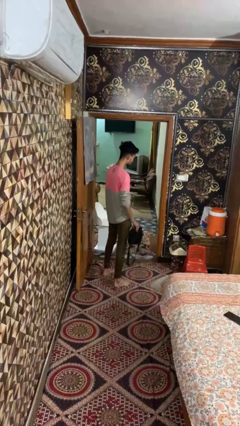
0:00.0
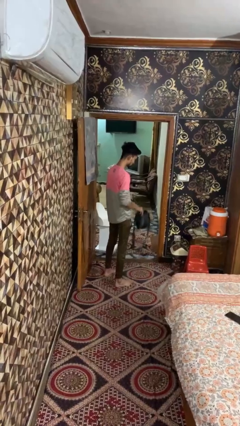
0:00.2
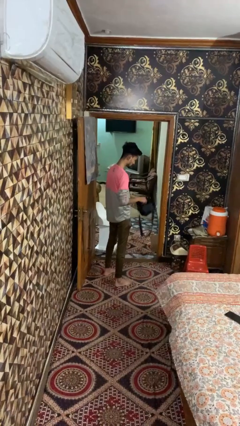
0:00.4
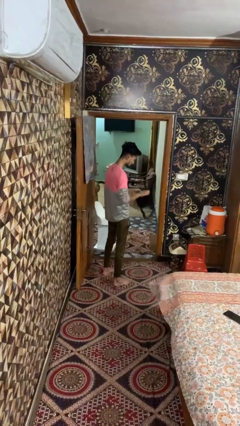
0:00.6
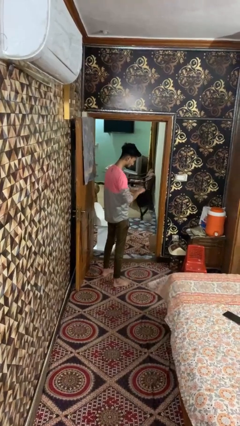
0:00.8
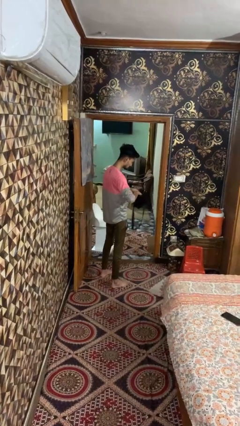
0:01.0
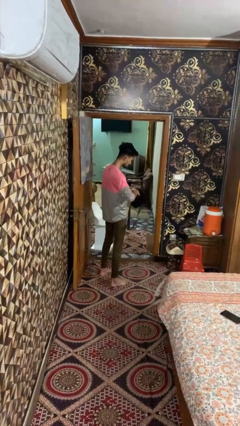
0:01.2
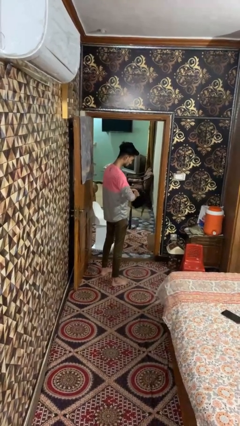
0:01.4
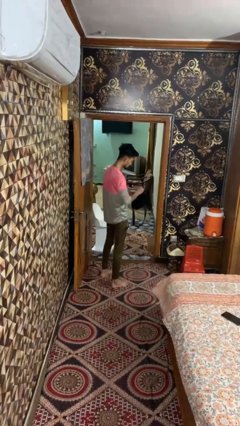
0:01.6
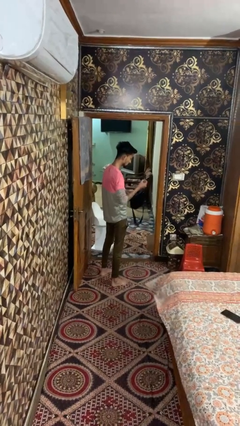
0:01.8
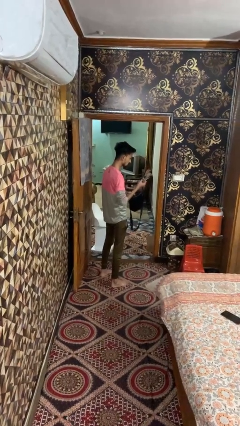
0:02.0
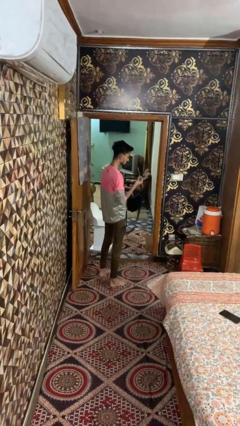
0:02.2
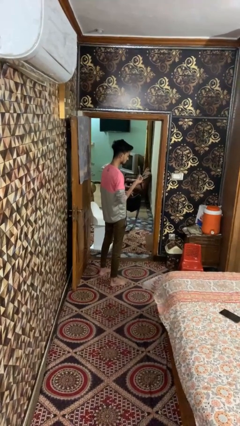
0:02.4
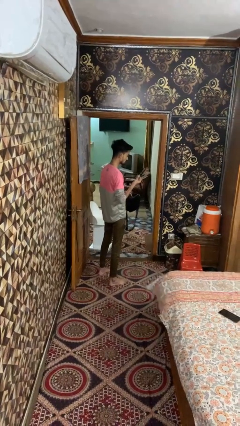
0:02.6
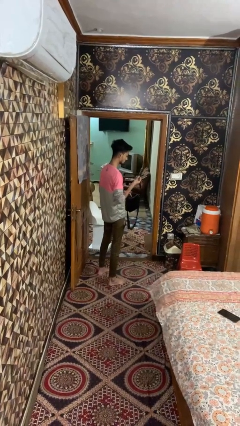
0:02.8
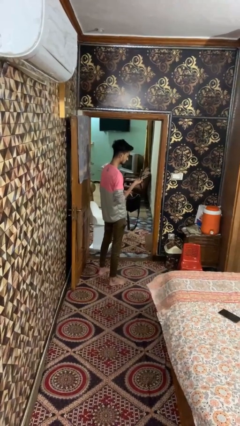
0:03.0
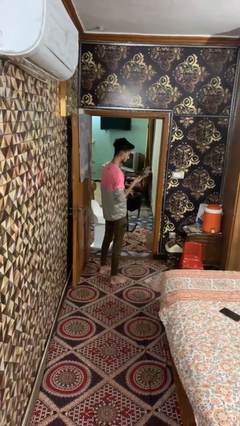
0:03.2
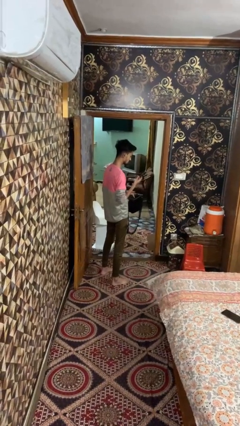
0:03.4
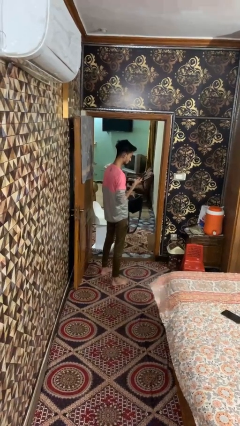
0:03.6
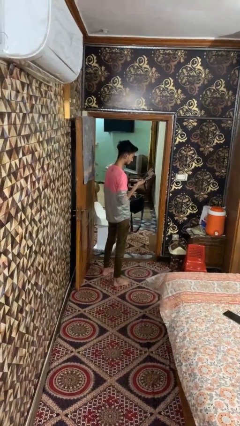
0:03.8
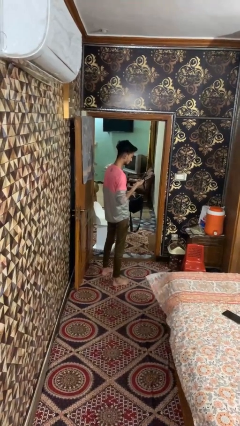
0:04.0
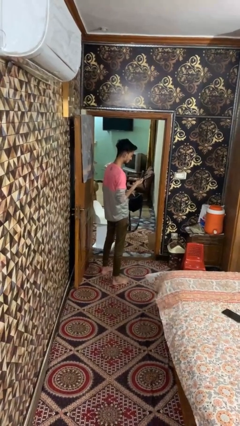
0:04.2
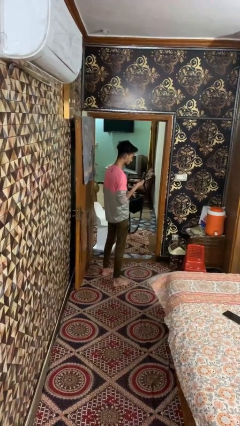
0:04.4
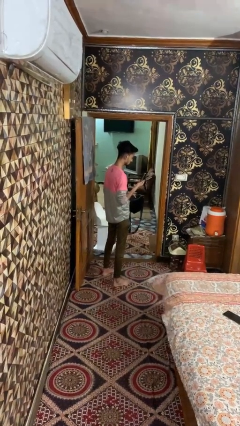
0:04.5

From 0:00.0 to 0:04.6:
person takes object from bag

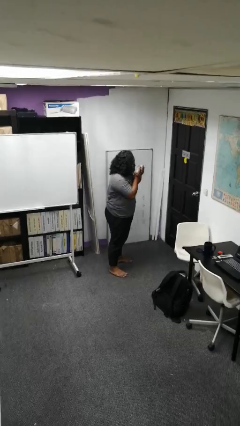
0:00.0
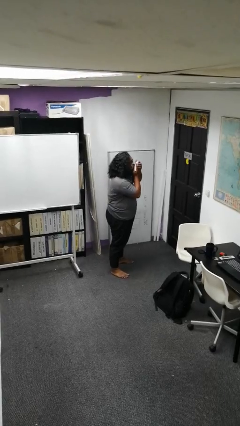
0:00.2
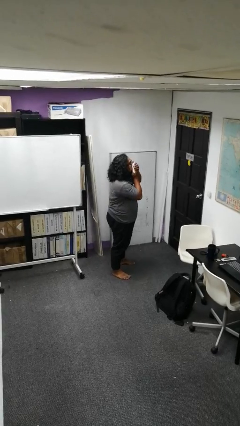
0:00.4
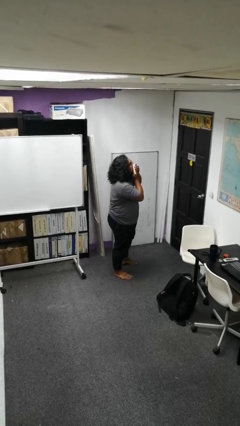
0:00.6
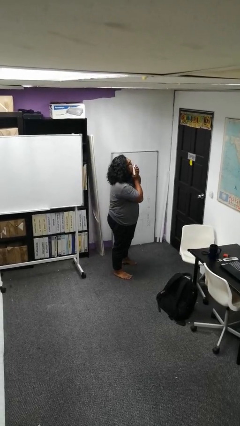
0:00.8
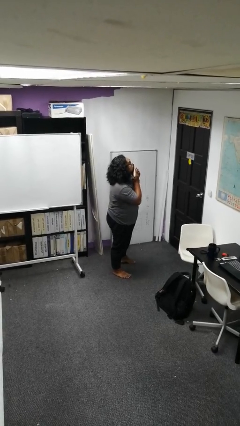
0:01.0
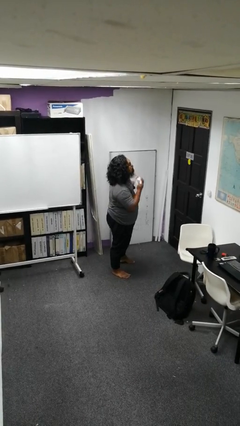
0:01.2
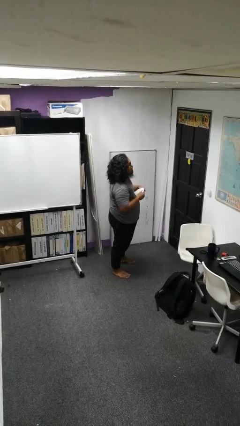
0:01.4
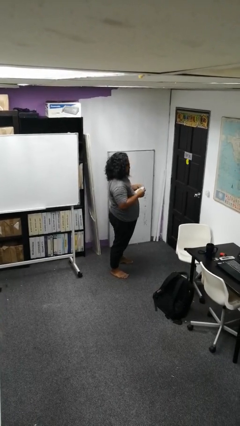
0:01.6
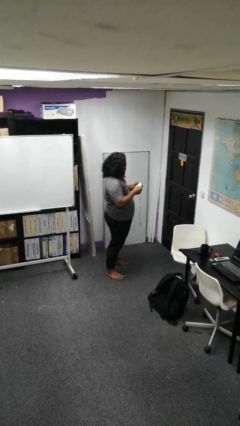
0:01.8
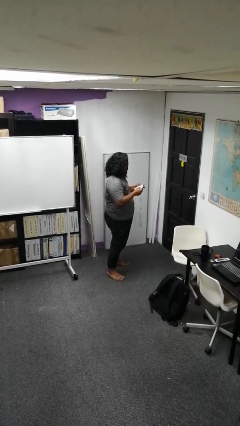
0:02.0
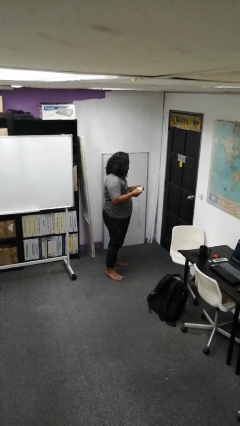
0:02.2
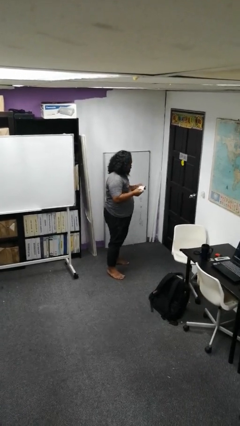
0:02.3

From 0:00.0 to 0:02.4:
person wipes mouth with napkin

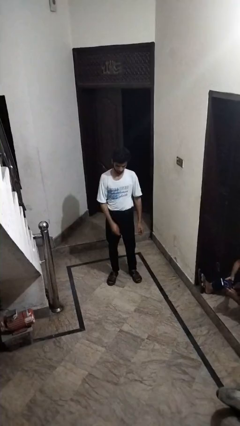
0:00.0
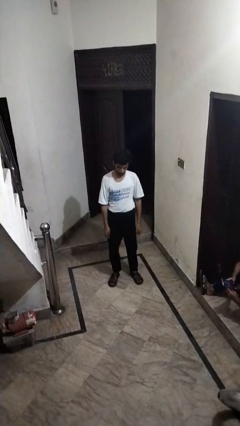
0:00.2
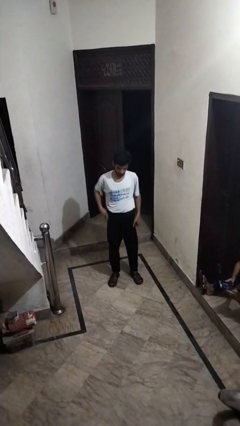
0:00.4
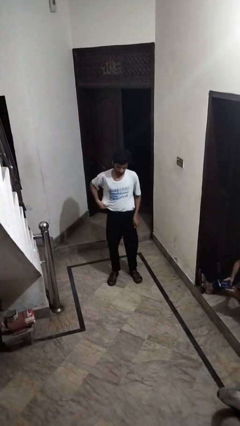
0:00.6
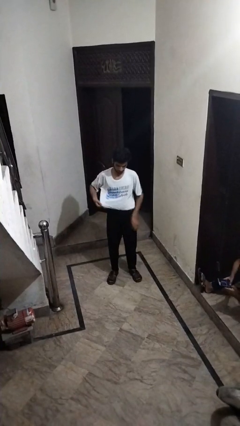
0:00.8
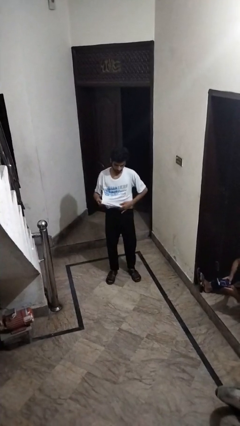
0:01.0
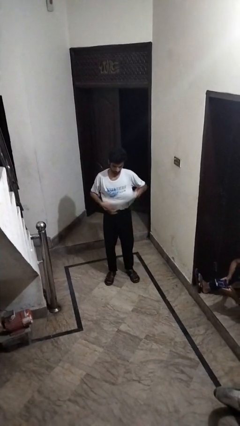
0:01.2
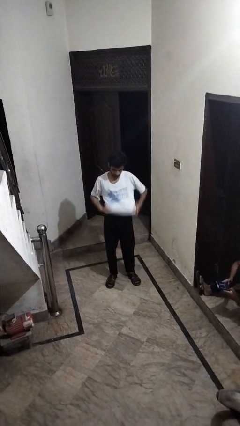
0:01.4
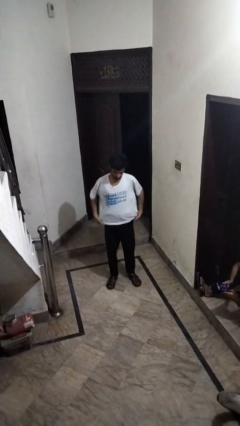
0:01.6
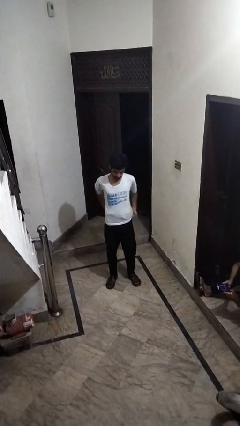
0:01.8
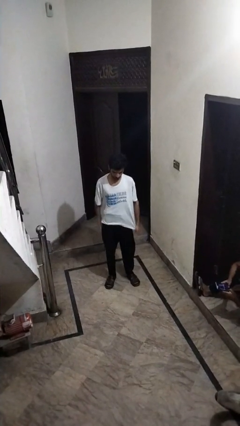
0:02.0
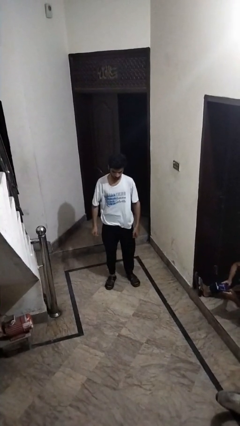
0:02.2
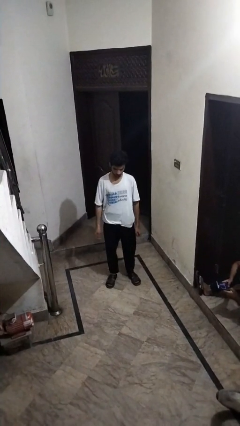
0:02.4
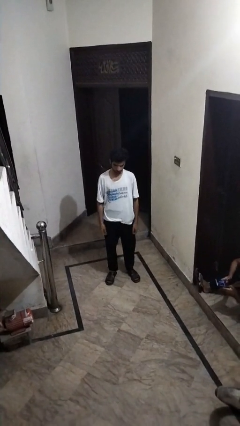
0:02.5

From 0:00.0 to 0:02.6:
person untucks shirt

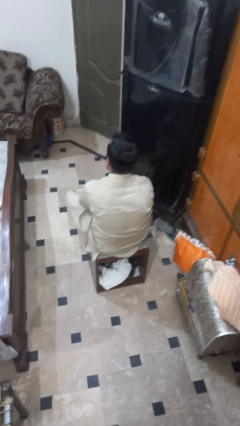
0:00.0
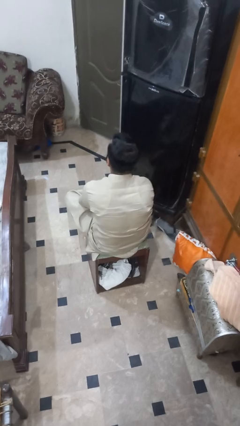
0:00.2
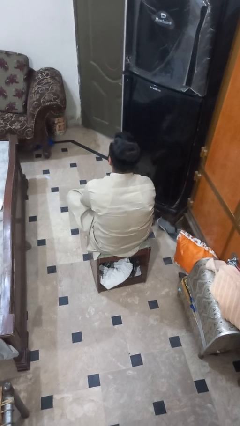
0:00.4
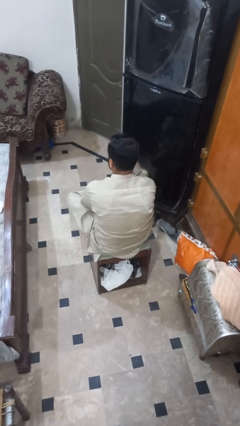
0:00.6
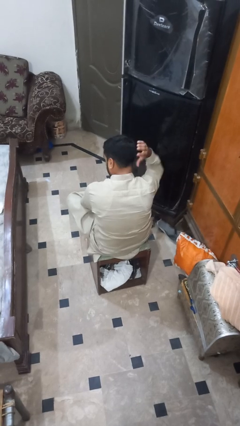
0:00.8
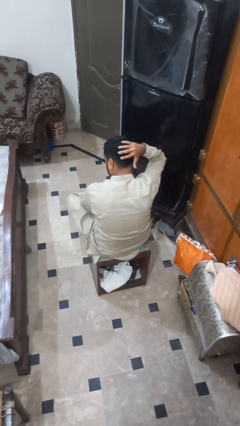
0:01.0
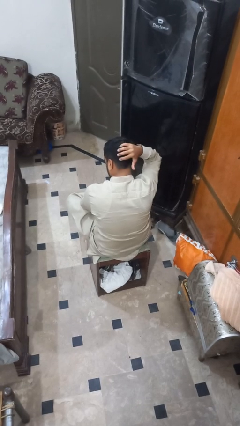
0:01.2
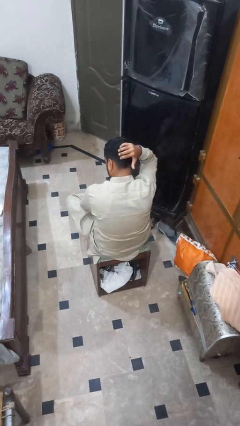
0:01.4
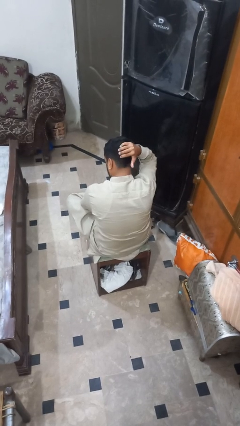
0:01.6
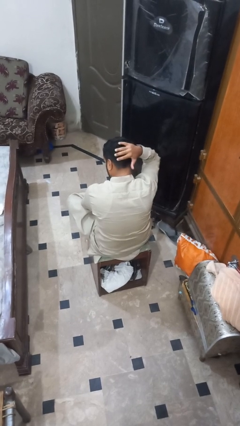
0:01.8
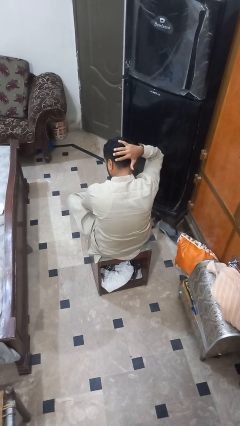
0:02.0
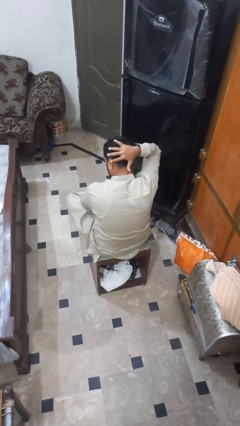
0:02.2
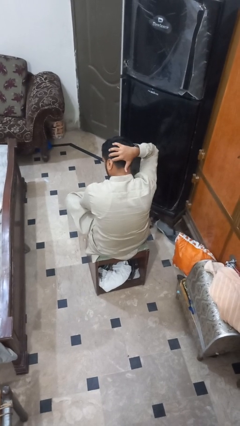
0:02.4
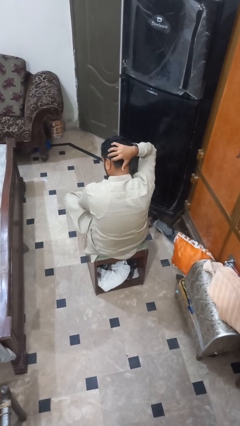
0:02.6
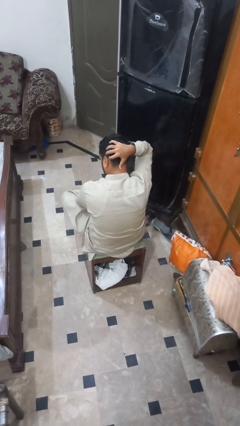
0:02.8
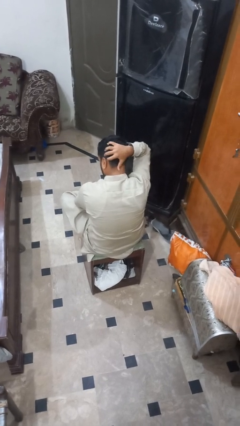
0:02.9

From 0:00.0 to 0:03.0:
person strokes hair

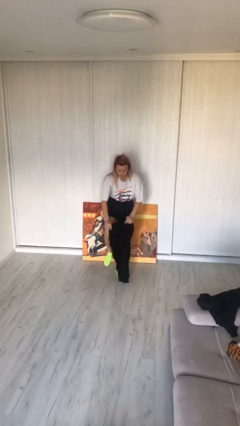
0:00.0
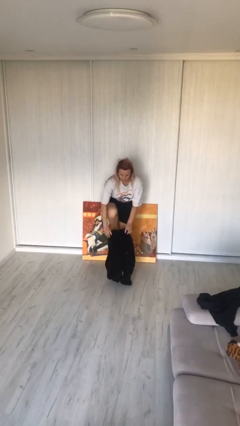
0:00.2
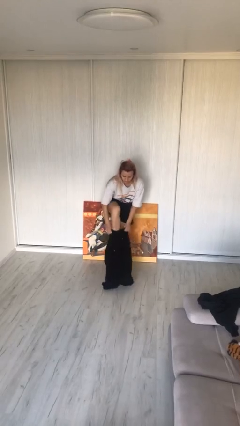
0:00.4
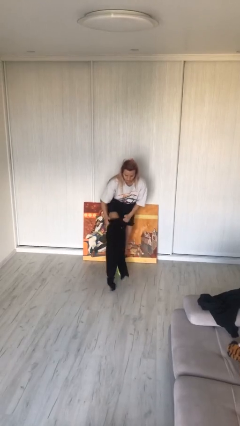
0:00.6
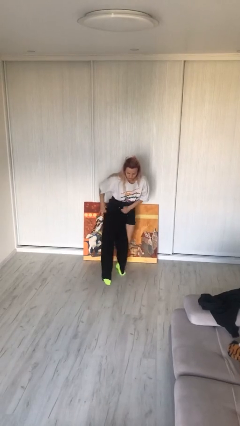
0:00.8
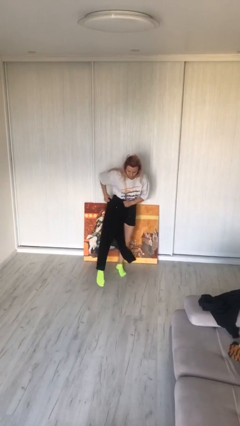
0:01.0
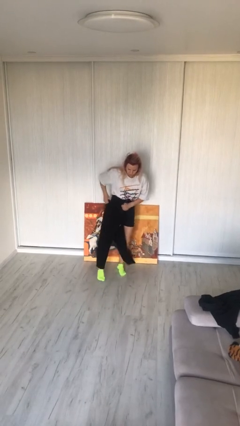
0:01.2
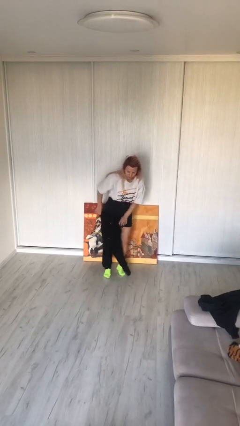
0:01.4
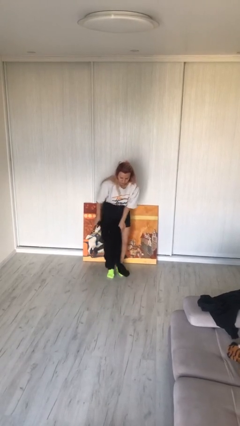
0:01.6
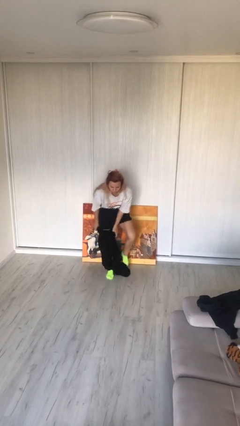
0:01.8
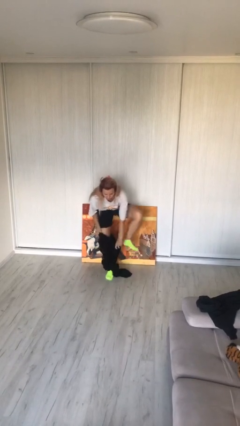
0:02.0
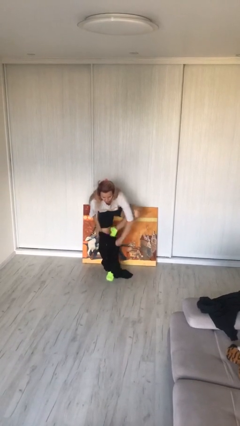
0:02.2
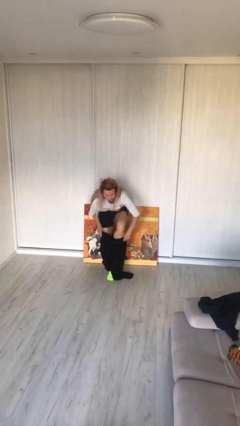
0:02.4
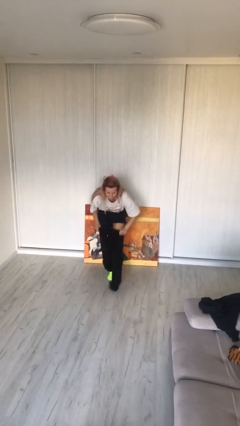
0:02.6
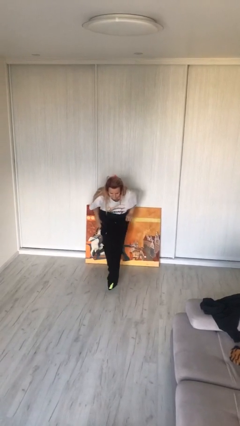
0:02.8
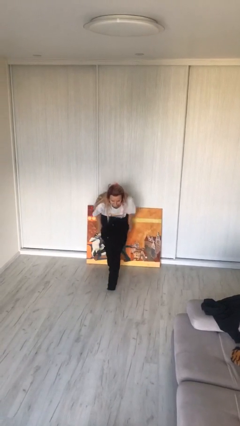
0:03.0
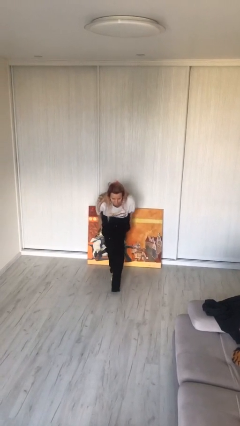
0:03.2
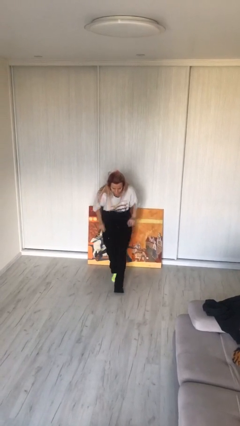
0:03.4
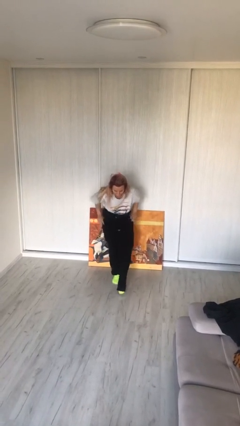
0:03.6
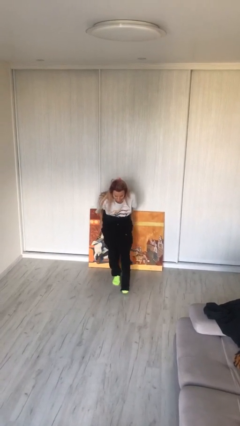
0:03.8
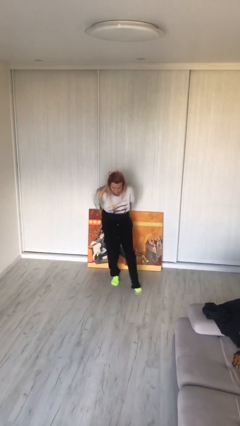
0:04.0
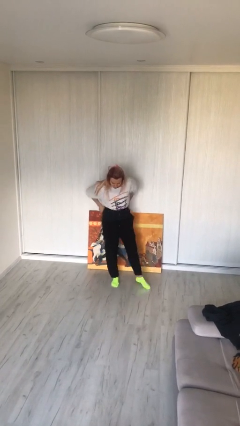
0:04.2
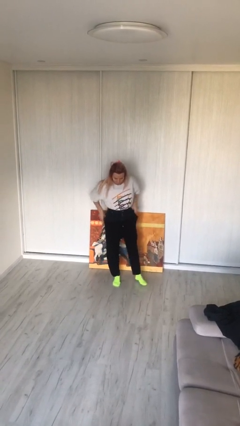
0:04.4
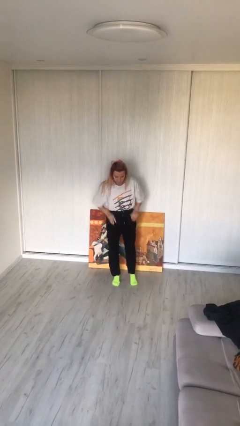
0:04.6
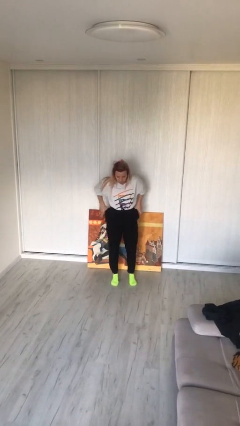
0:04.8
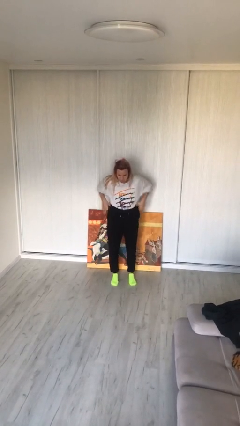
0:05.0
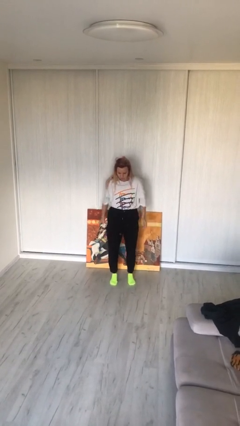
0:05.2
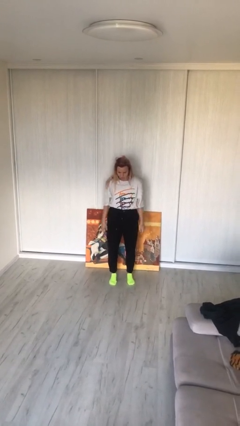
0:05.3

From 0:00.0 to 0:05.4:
person puts on pants
